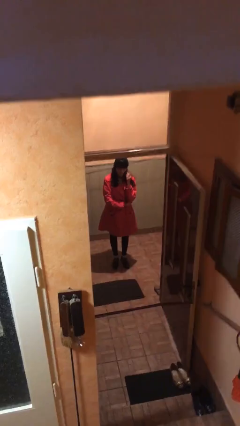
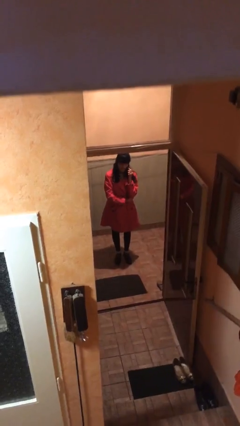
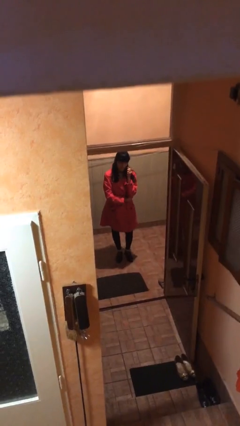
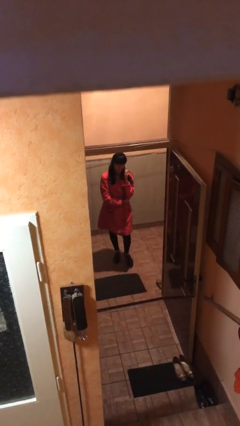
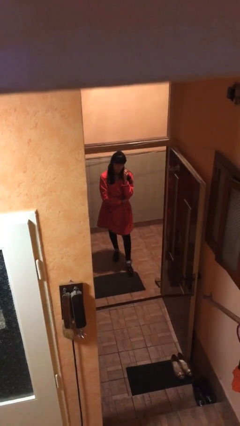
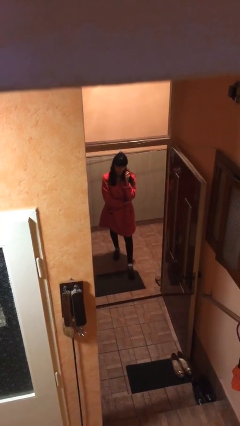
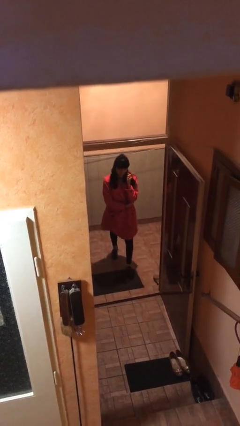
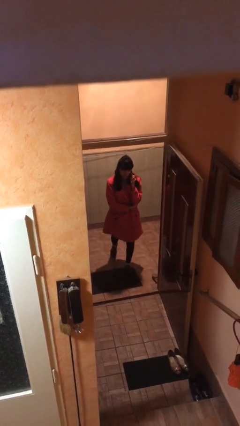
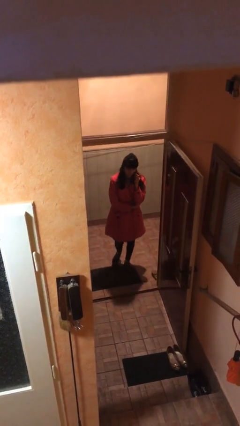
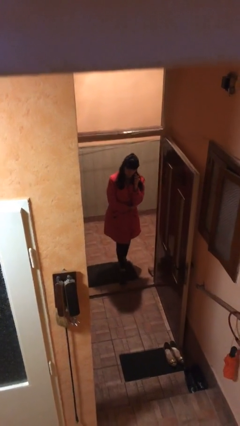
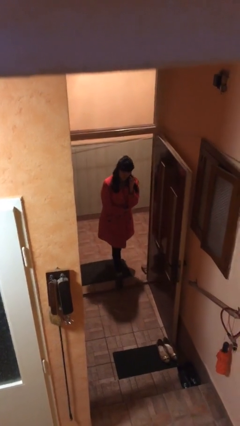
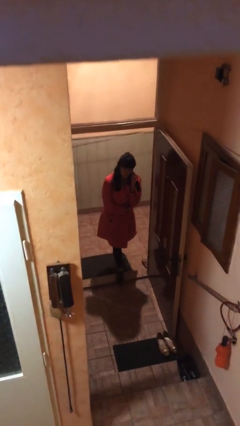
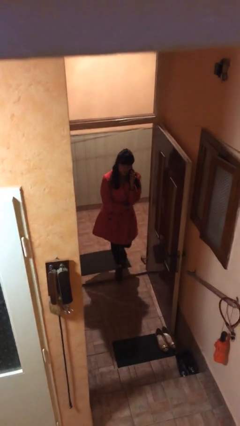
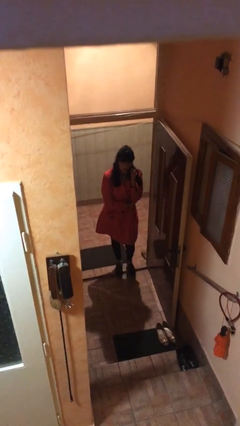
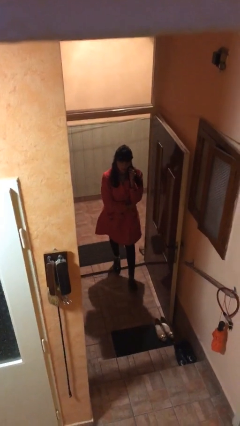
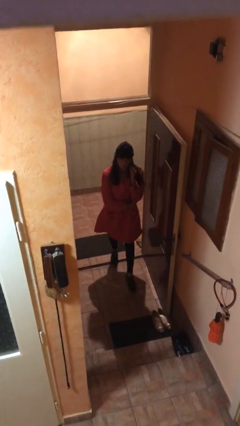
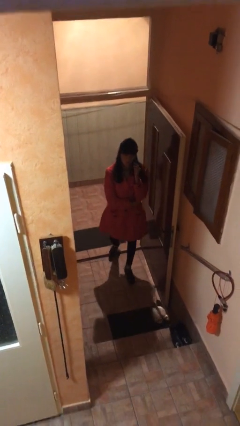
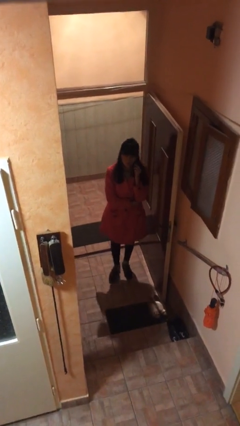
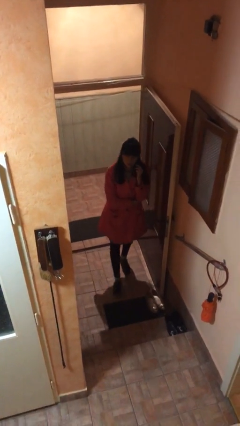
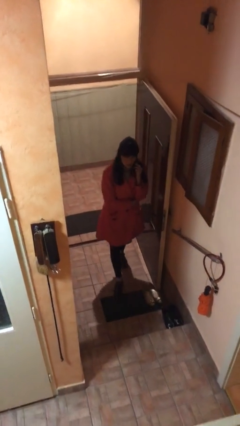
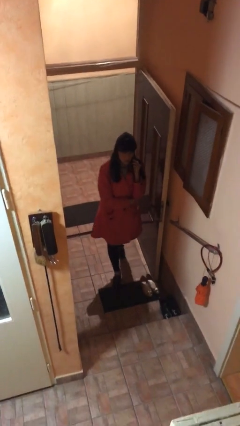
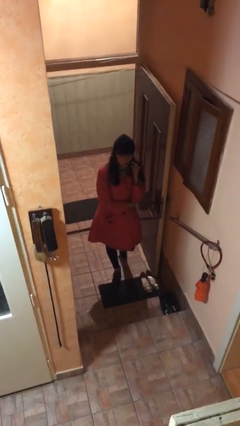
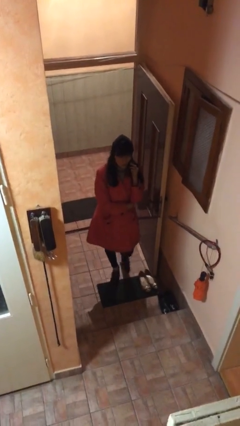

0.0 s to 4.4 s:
person enters scene through structure

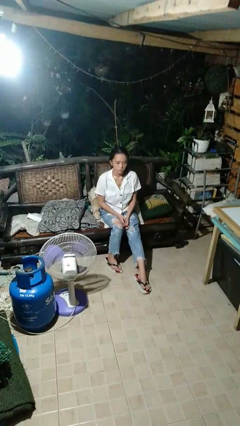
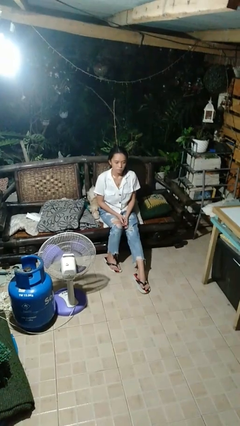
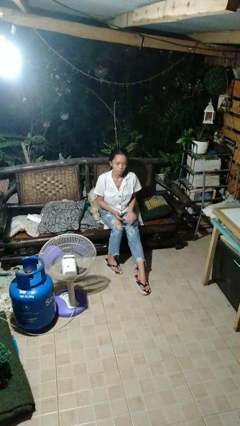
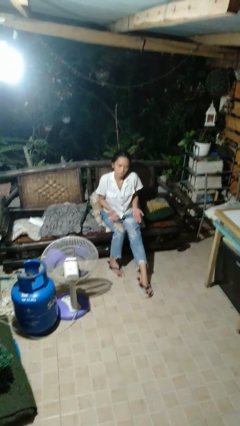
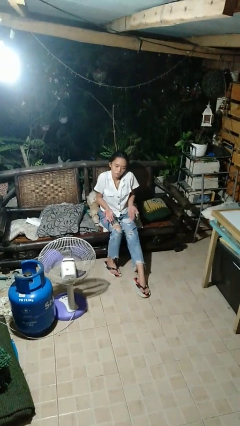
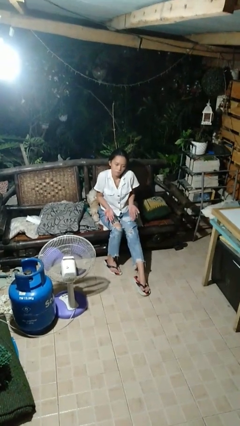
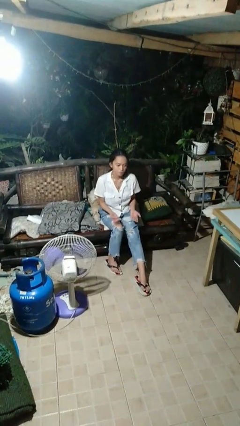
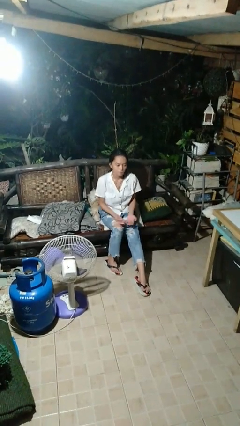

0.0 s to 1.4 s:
person shrugs

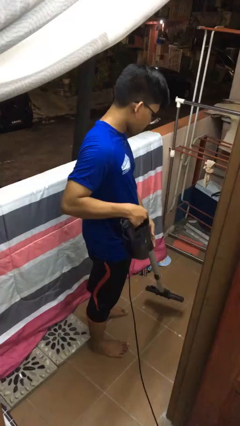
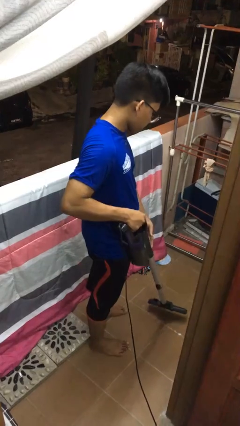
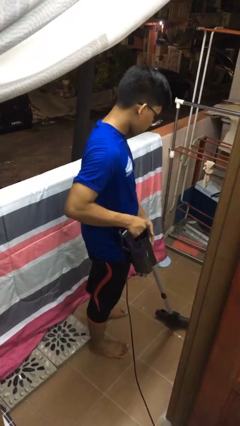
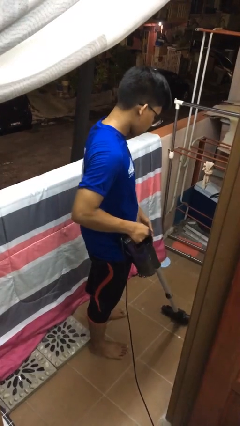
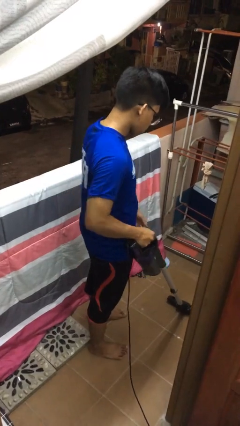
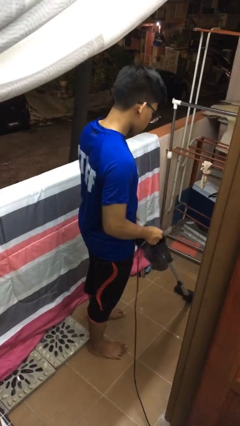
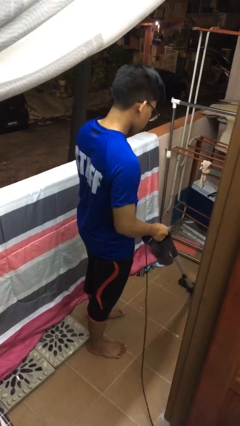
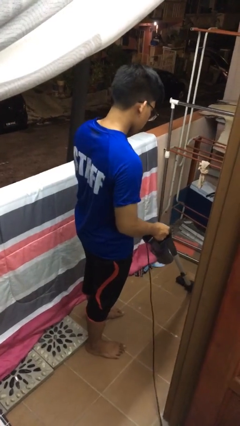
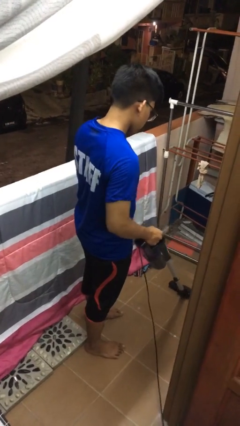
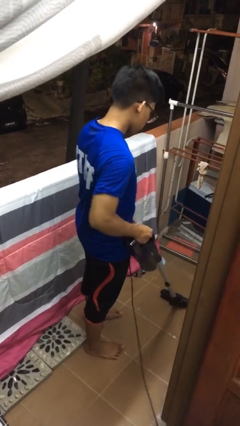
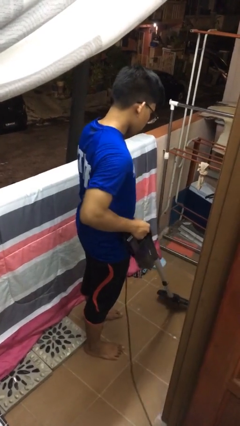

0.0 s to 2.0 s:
person vacuums carpet

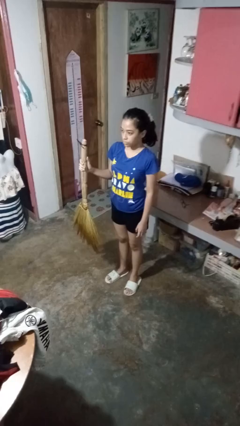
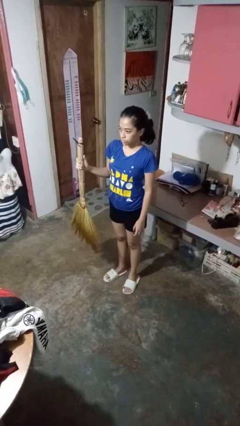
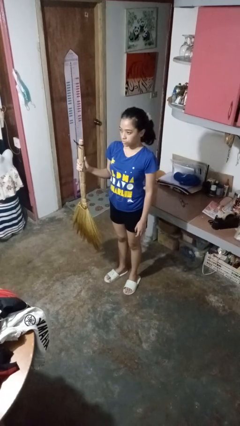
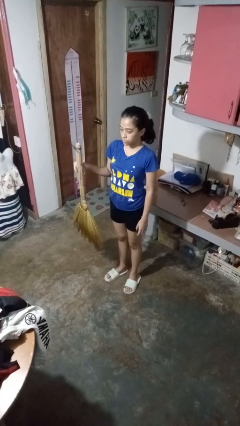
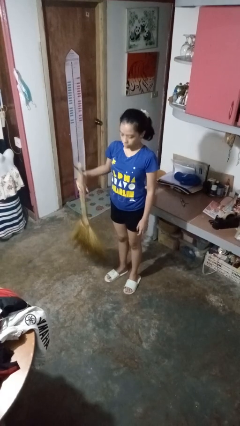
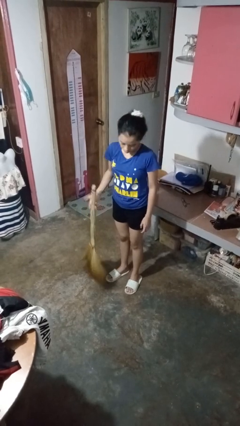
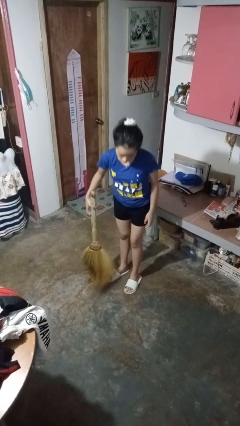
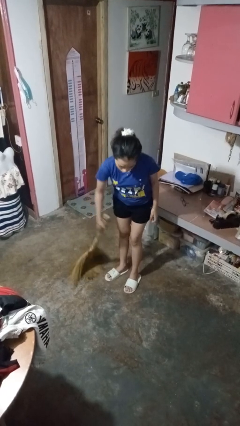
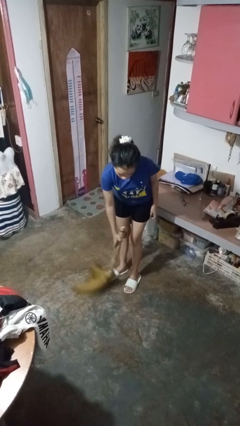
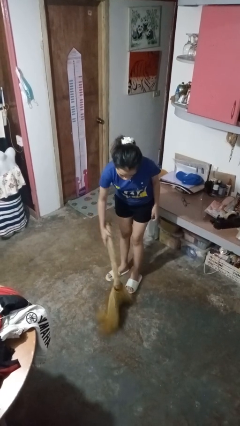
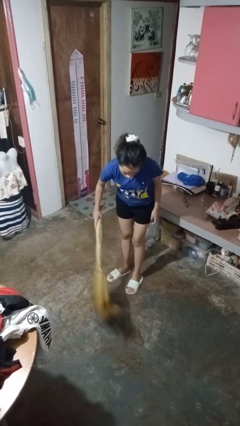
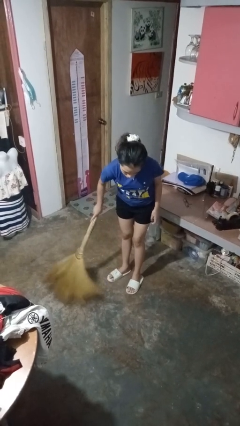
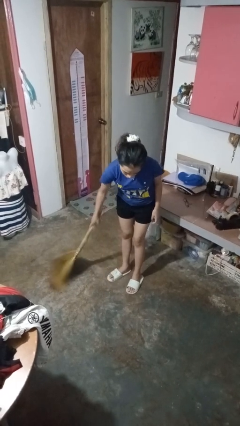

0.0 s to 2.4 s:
person sweeps floor

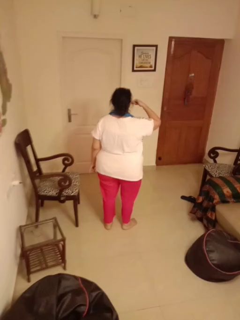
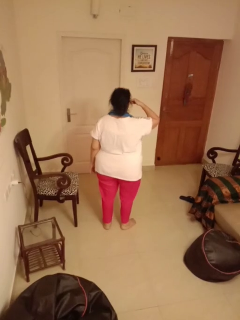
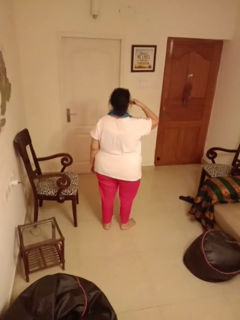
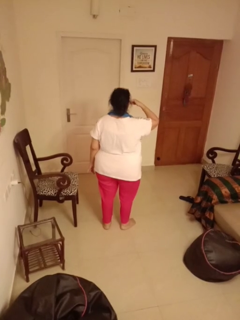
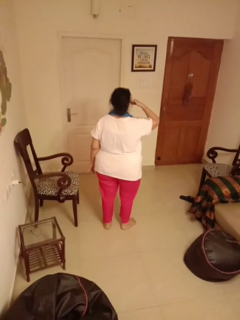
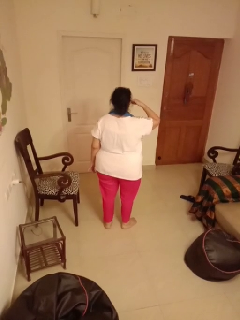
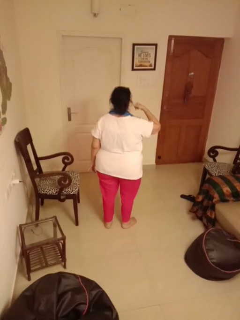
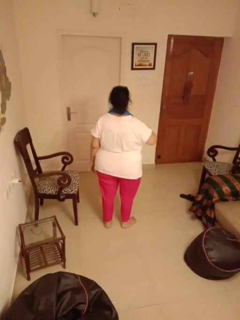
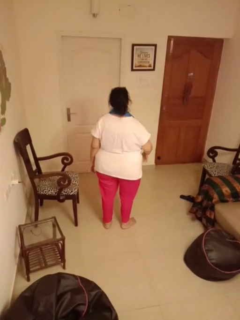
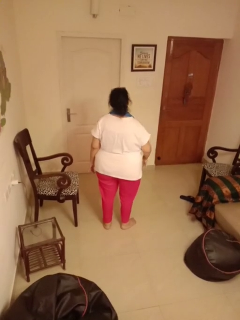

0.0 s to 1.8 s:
person gestures call me

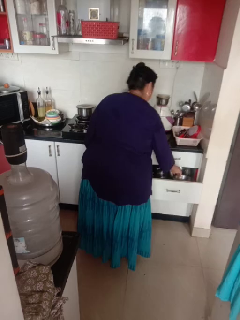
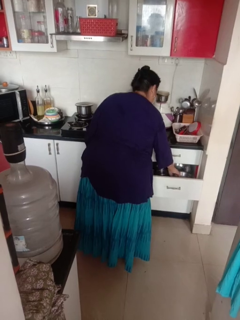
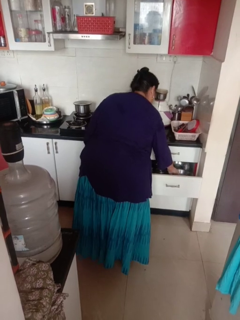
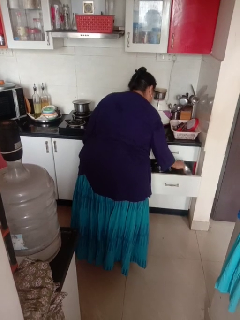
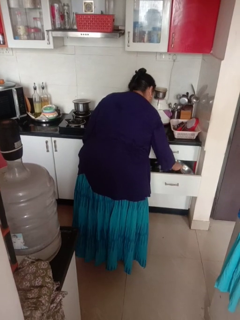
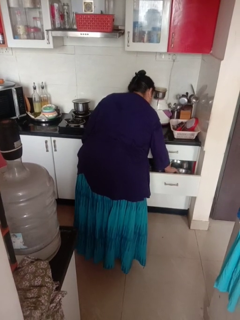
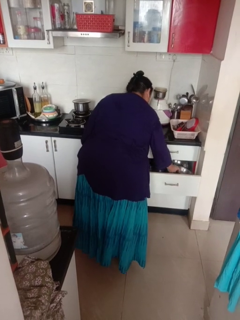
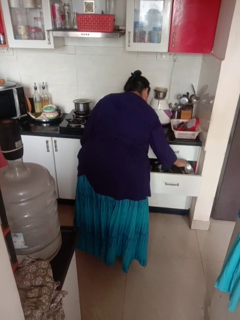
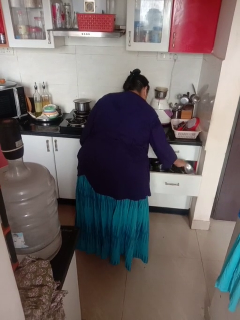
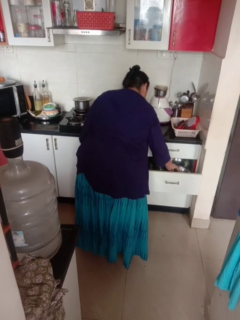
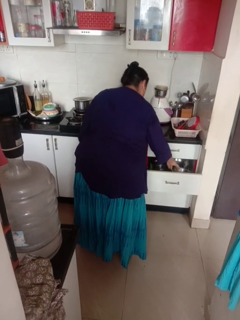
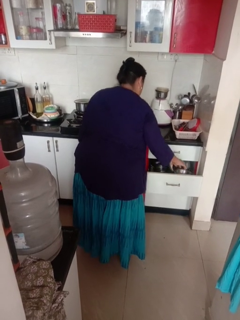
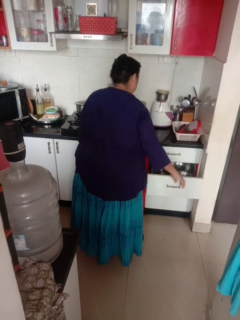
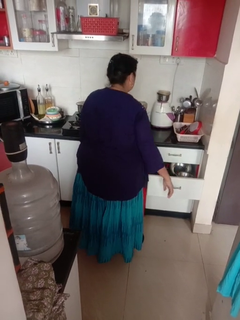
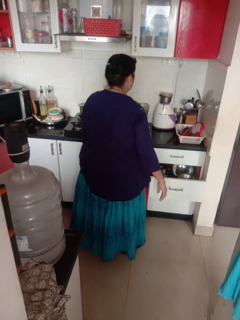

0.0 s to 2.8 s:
person searches in kitchen drawer

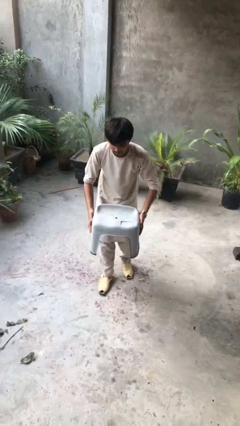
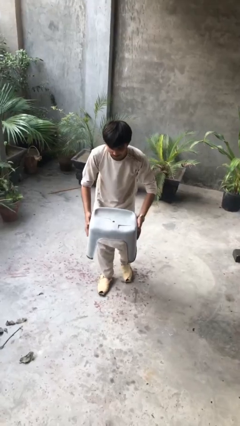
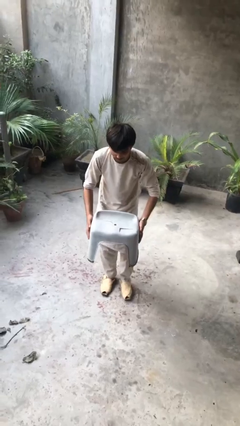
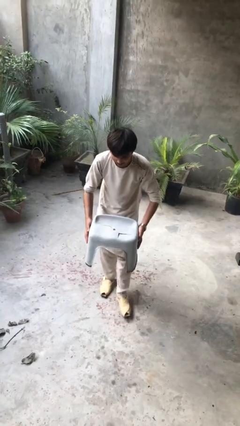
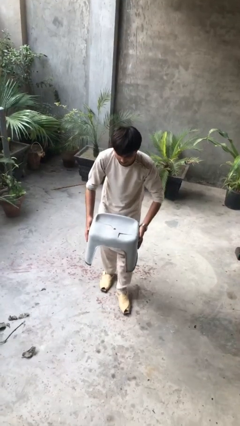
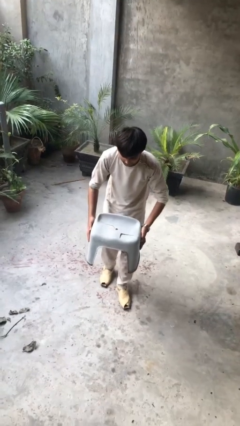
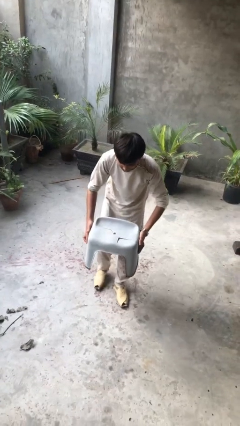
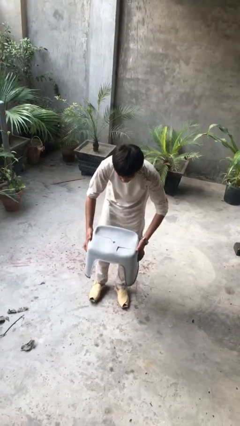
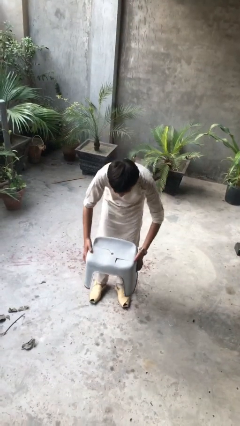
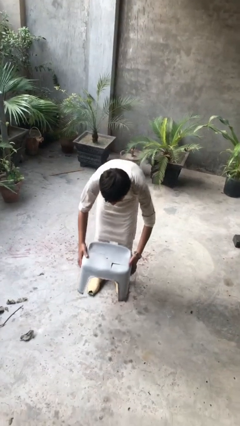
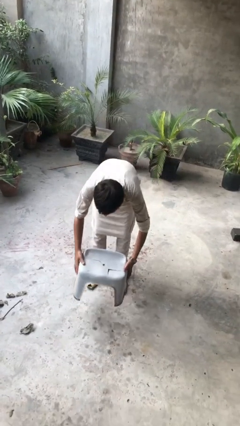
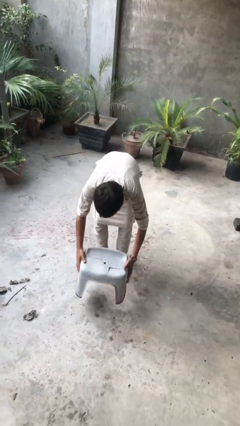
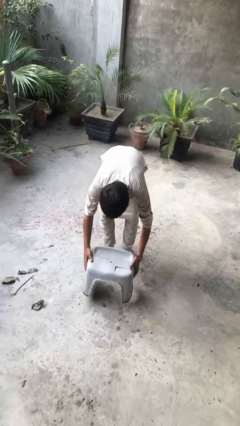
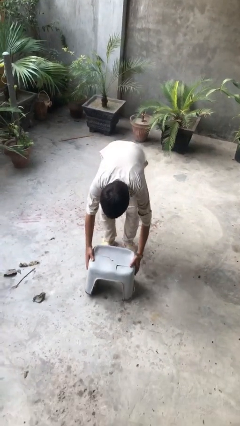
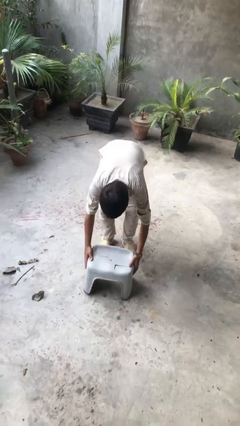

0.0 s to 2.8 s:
person puts down object on floor

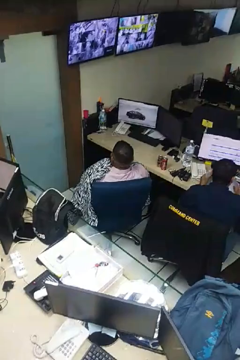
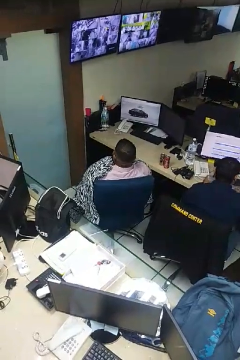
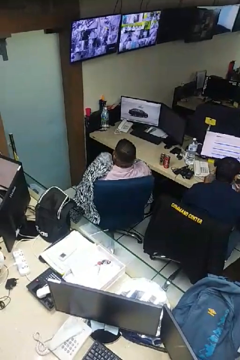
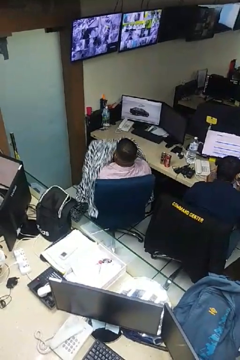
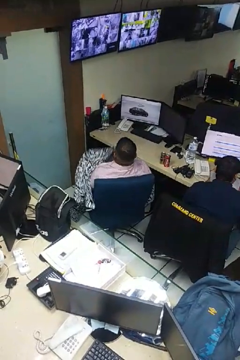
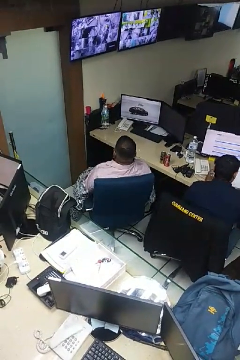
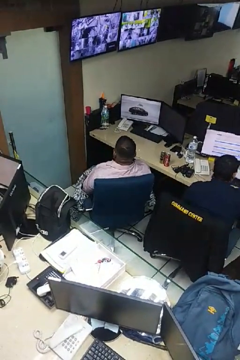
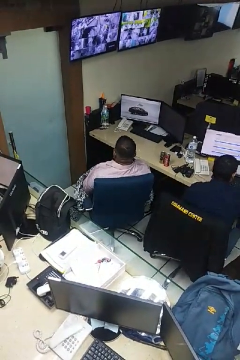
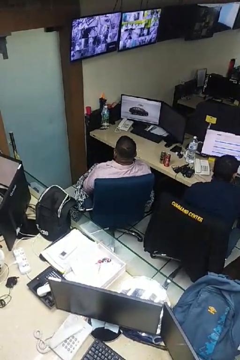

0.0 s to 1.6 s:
person uncovers with blanket
